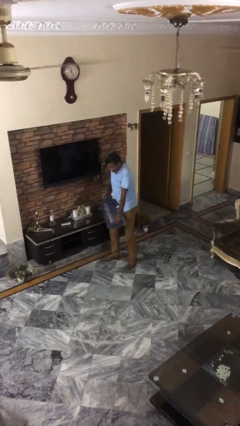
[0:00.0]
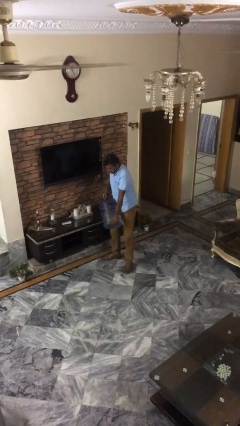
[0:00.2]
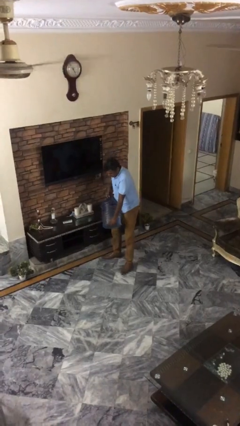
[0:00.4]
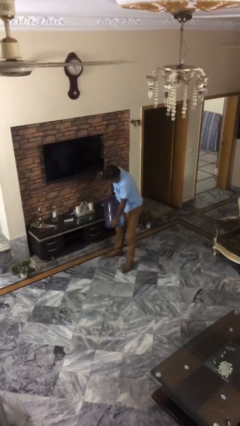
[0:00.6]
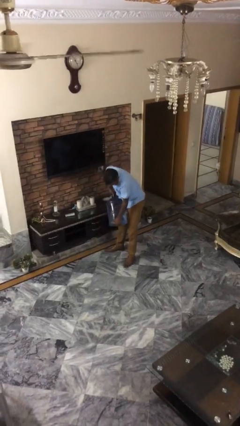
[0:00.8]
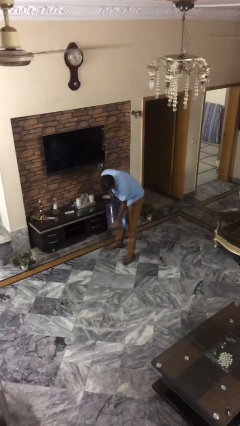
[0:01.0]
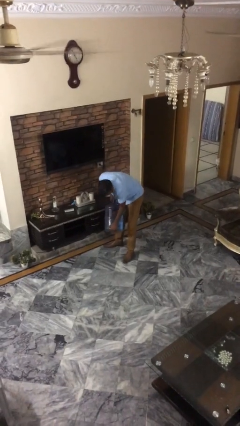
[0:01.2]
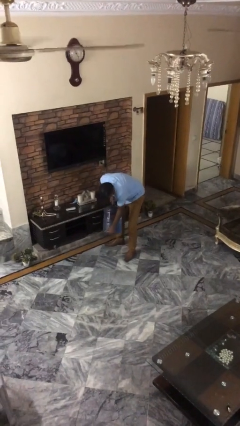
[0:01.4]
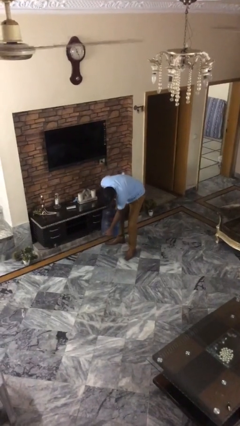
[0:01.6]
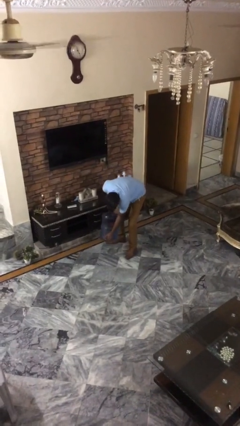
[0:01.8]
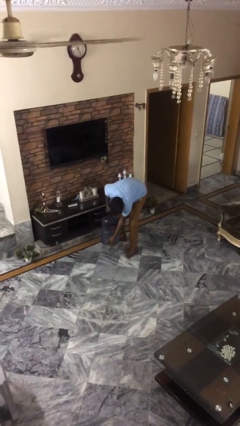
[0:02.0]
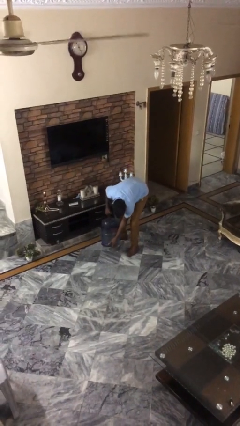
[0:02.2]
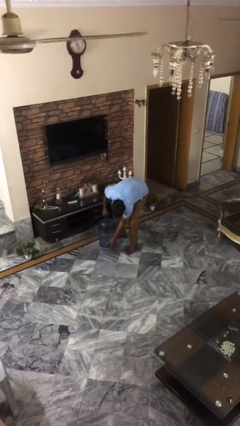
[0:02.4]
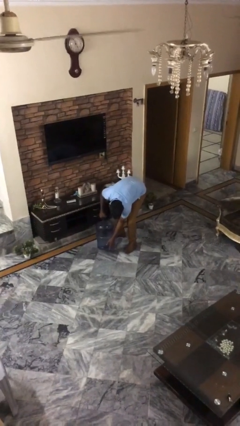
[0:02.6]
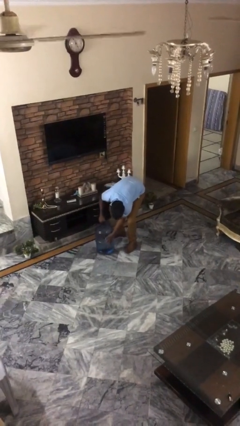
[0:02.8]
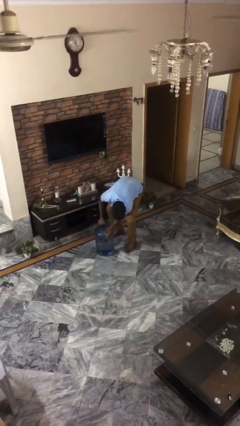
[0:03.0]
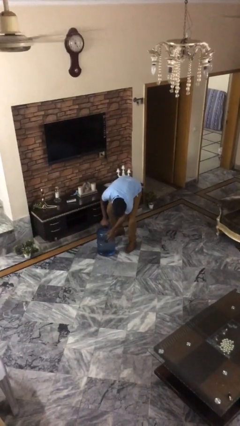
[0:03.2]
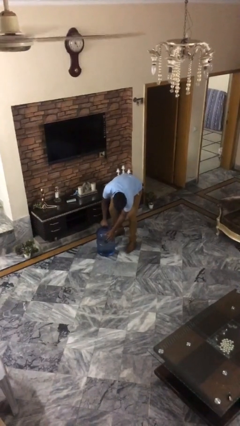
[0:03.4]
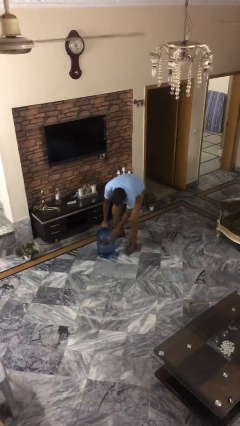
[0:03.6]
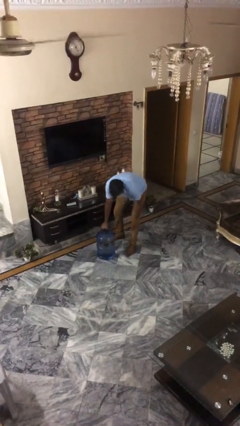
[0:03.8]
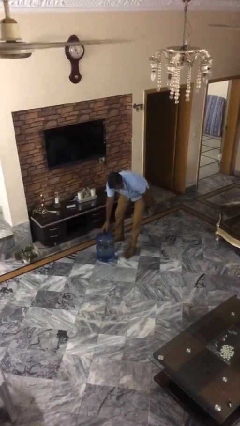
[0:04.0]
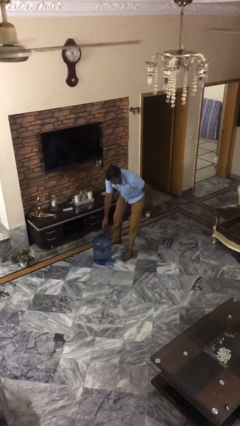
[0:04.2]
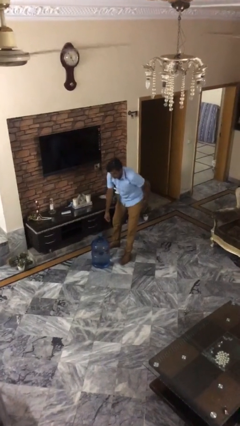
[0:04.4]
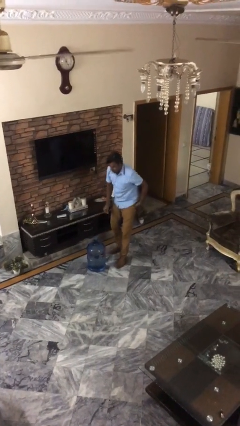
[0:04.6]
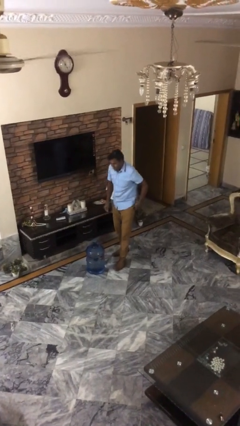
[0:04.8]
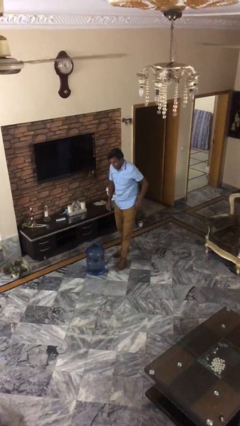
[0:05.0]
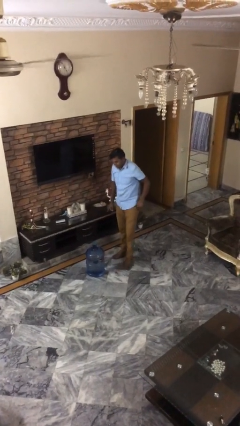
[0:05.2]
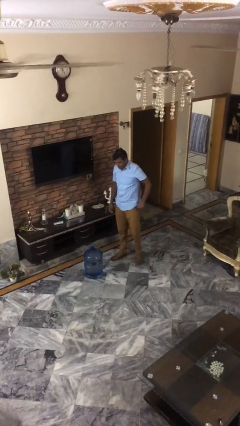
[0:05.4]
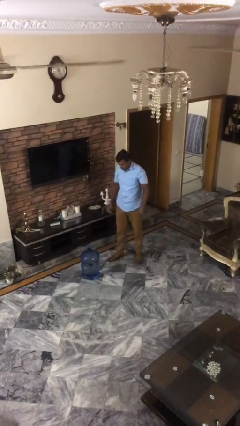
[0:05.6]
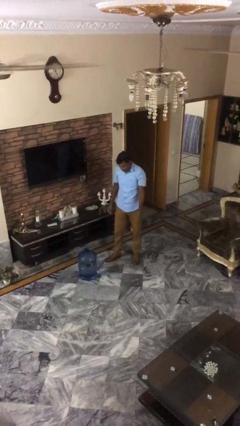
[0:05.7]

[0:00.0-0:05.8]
person puts down object on floor

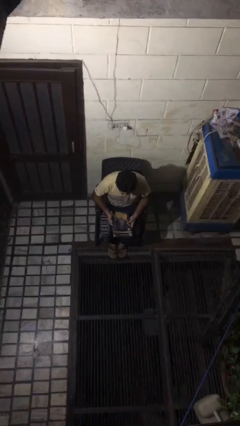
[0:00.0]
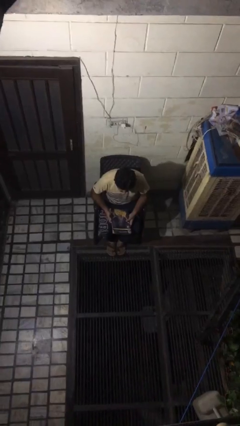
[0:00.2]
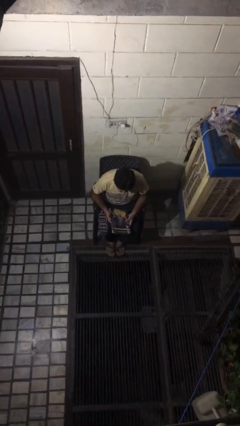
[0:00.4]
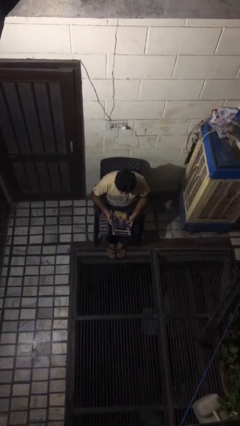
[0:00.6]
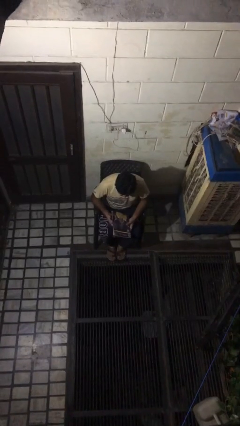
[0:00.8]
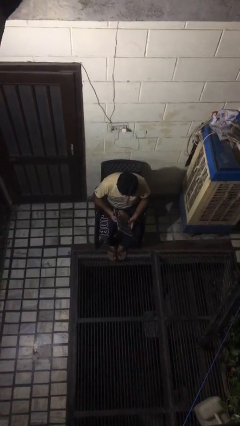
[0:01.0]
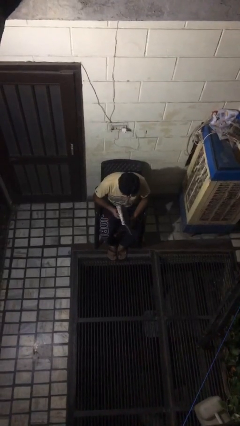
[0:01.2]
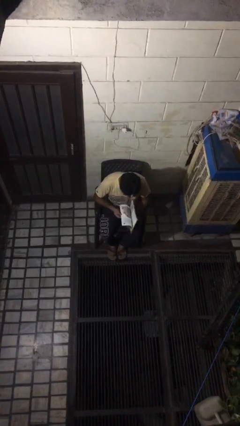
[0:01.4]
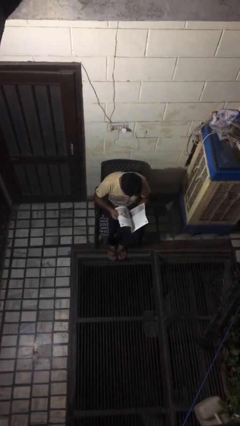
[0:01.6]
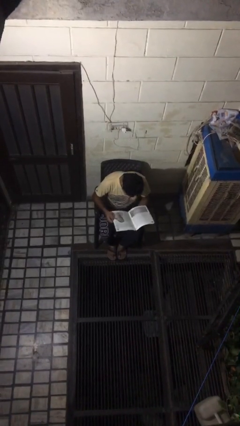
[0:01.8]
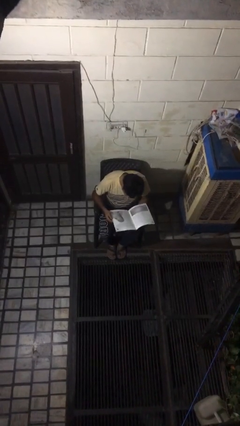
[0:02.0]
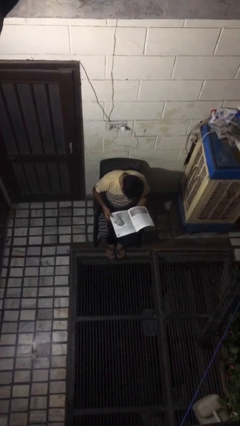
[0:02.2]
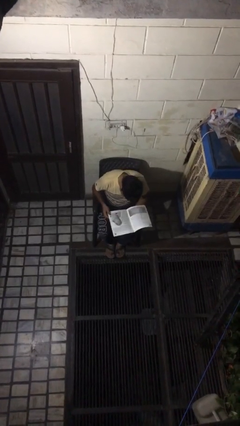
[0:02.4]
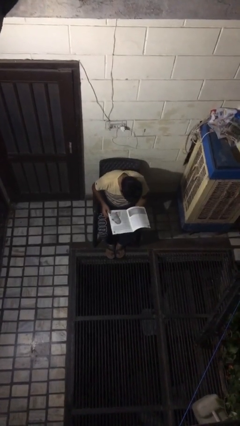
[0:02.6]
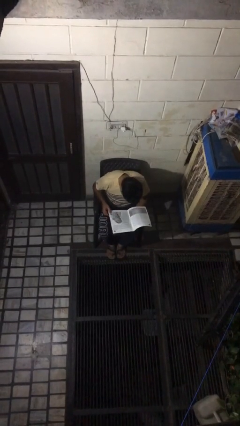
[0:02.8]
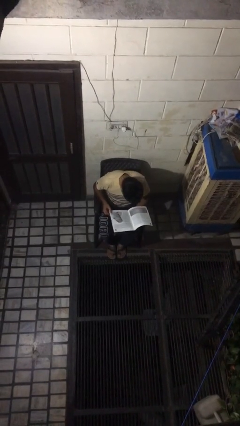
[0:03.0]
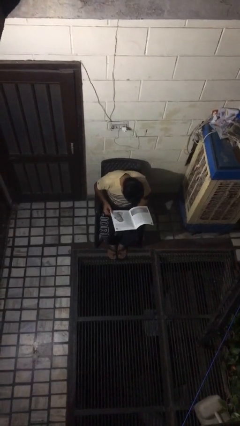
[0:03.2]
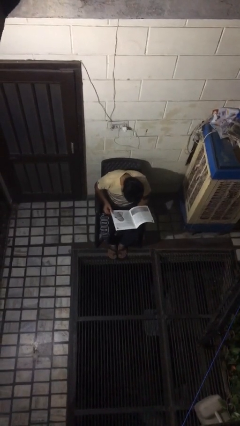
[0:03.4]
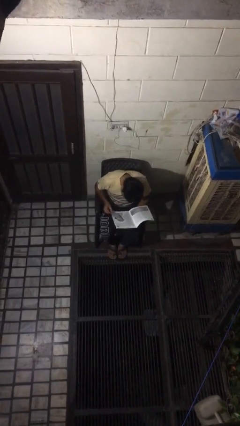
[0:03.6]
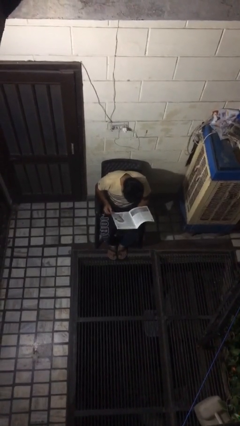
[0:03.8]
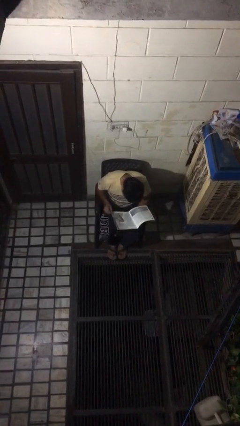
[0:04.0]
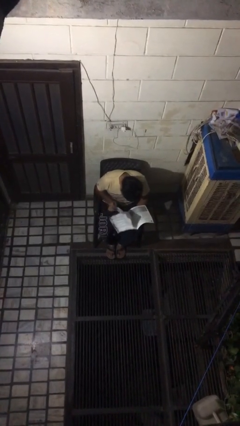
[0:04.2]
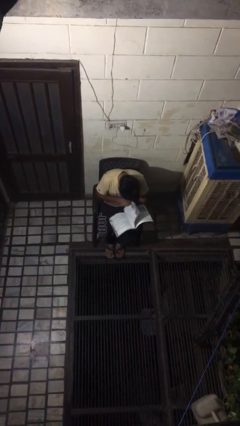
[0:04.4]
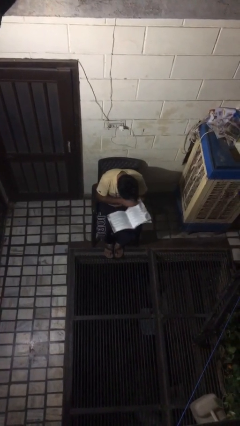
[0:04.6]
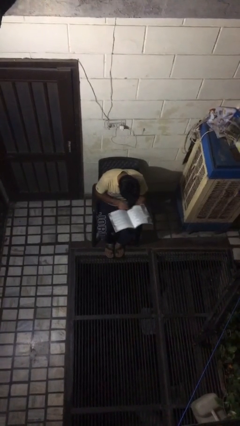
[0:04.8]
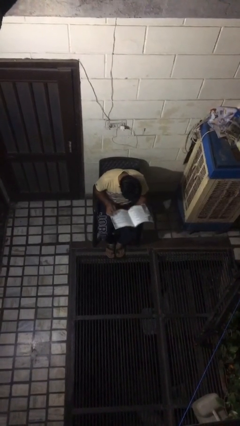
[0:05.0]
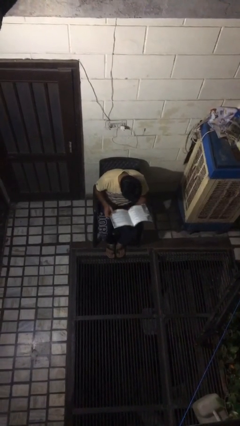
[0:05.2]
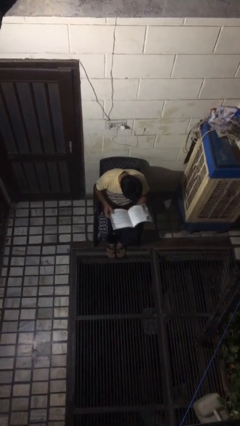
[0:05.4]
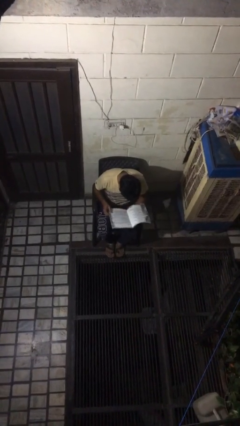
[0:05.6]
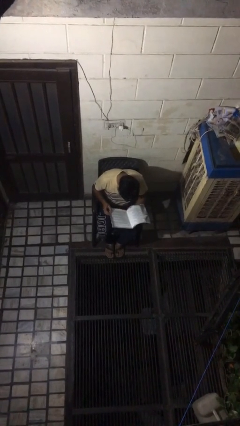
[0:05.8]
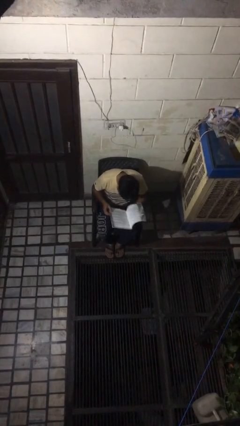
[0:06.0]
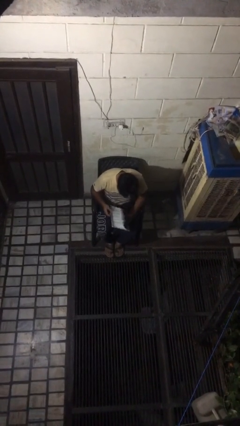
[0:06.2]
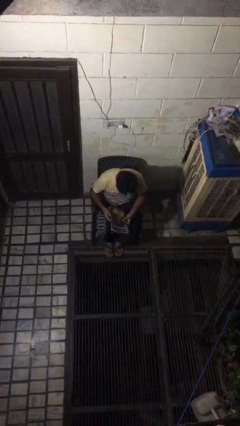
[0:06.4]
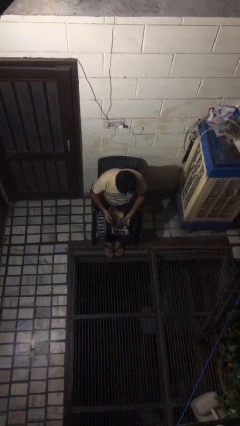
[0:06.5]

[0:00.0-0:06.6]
person reads magazine

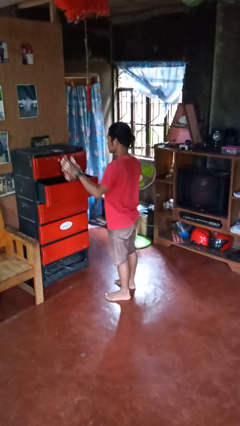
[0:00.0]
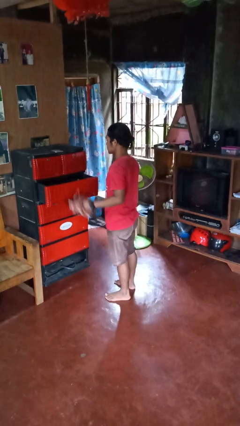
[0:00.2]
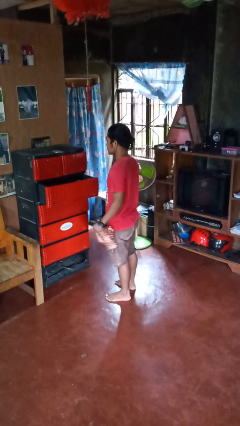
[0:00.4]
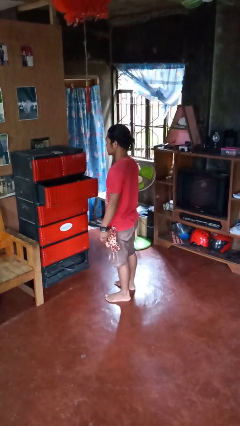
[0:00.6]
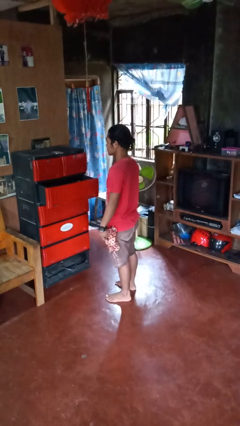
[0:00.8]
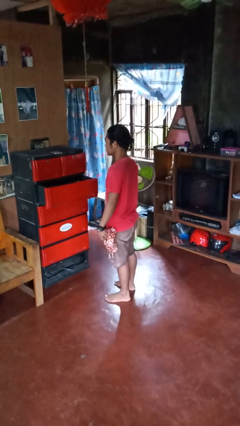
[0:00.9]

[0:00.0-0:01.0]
person takes clothes from dresser

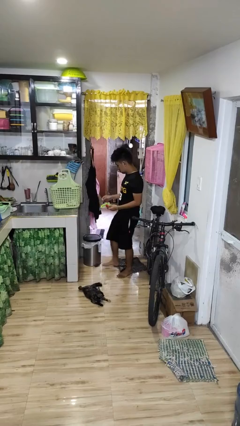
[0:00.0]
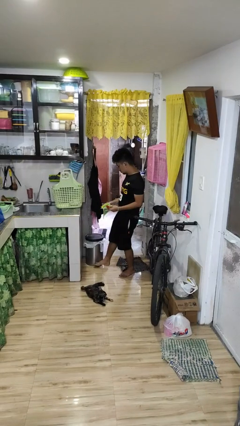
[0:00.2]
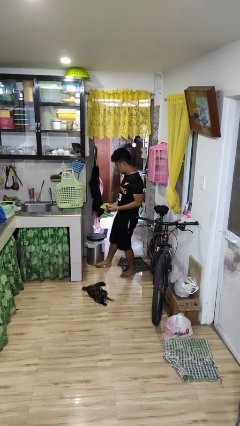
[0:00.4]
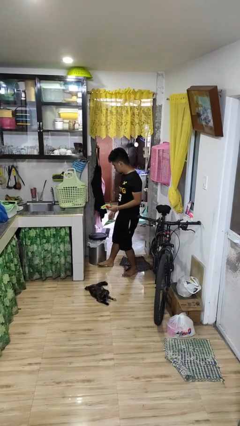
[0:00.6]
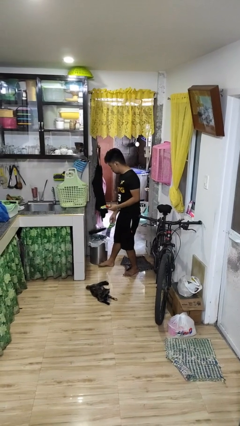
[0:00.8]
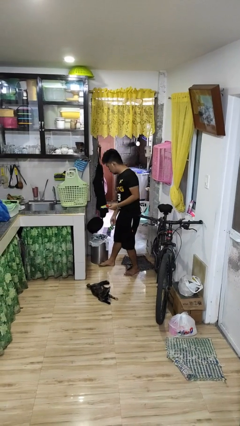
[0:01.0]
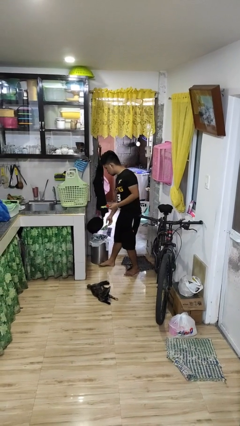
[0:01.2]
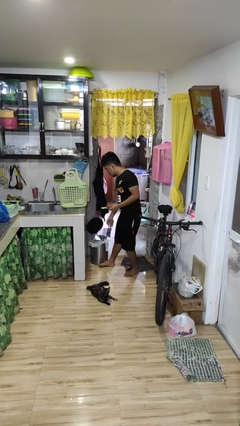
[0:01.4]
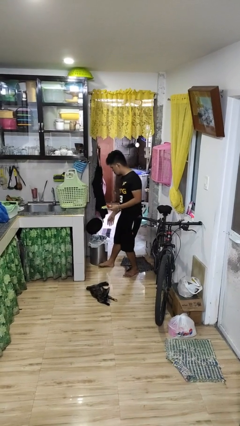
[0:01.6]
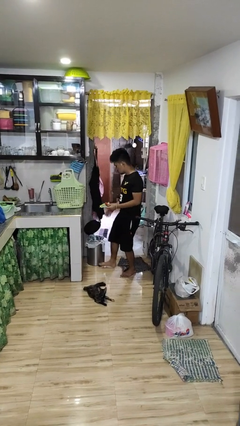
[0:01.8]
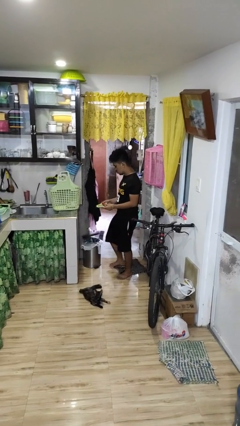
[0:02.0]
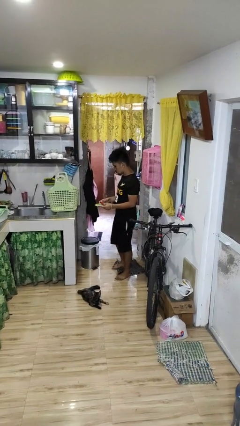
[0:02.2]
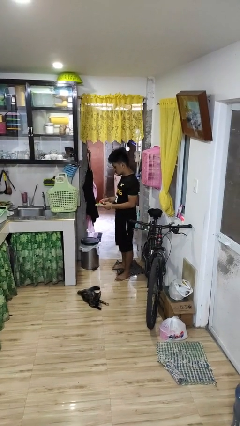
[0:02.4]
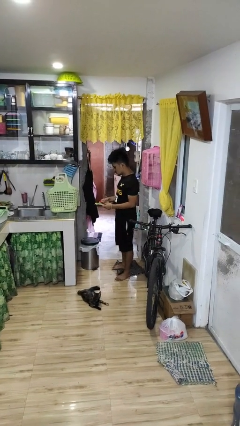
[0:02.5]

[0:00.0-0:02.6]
person discards trash

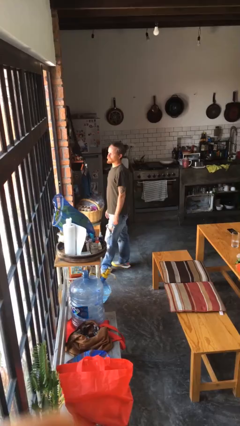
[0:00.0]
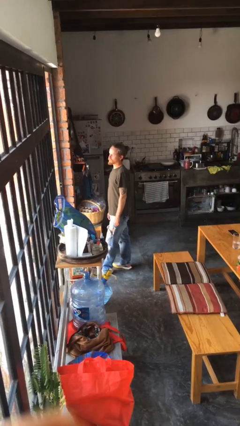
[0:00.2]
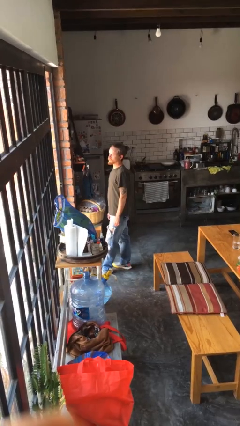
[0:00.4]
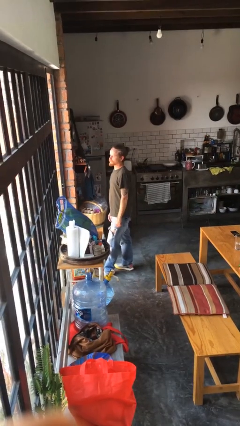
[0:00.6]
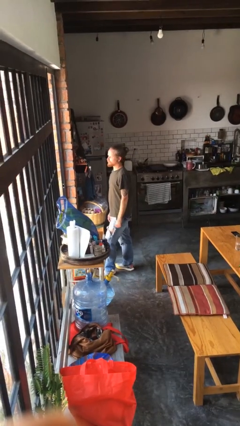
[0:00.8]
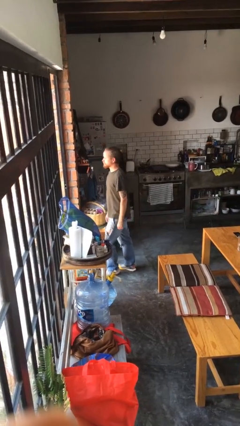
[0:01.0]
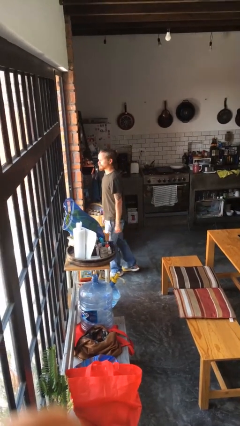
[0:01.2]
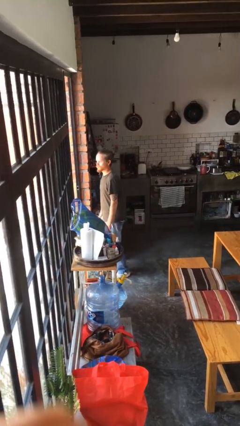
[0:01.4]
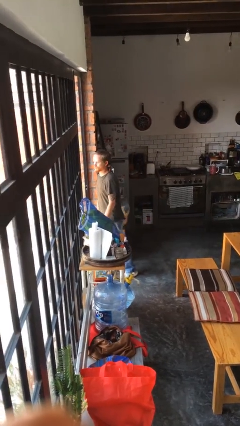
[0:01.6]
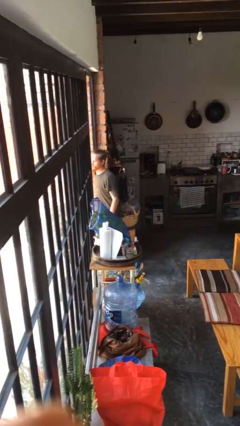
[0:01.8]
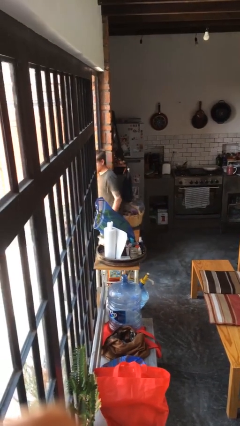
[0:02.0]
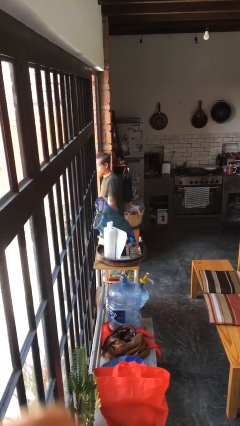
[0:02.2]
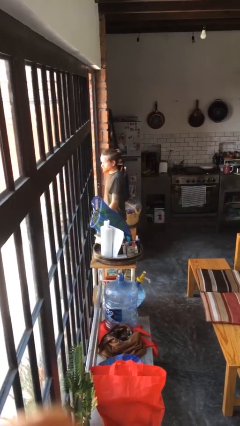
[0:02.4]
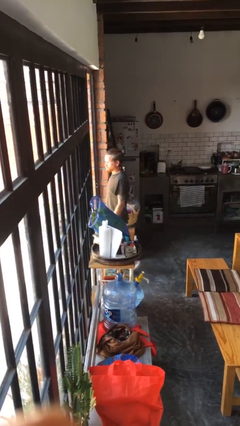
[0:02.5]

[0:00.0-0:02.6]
person bumps into wall
